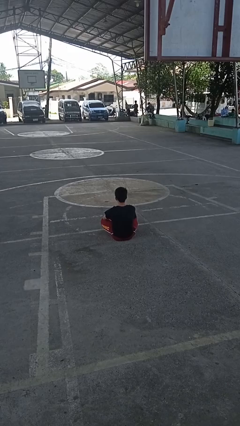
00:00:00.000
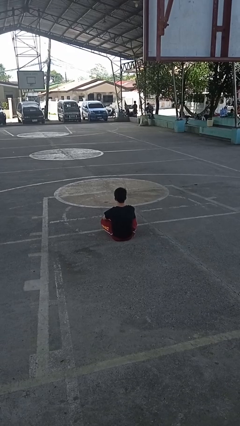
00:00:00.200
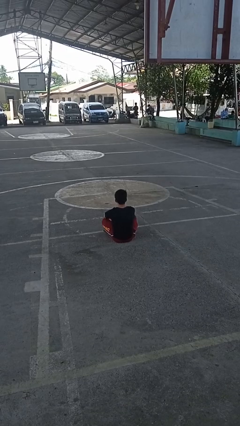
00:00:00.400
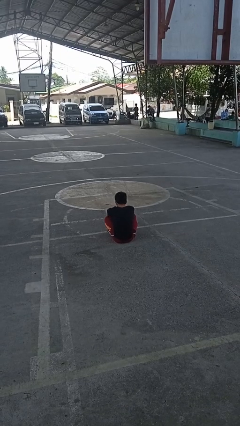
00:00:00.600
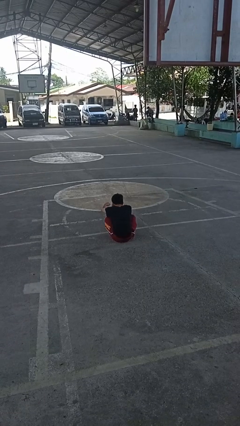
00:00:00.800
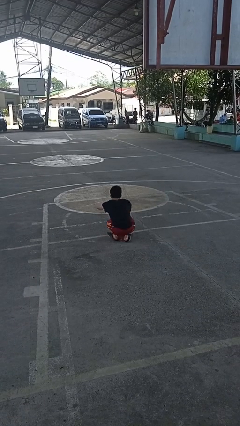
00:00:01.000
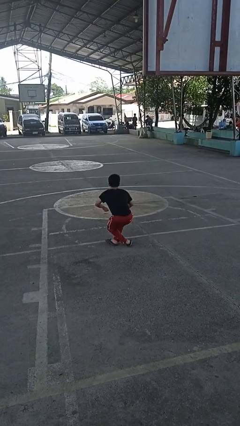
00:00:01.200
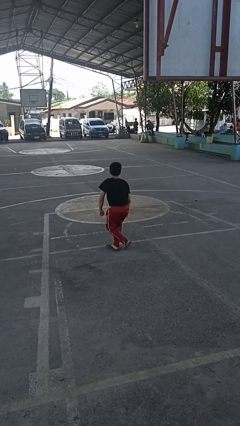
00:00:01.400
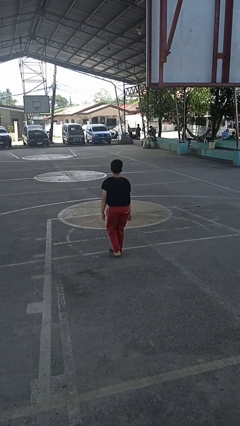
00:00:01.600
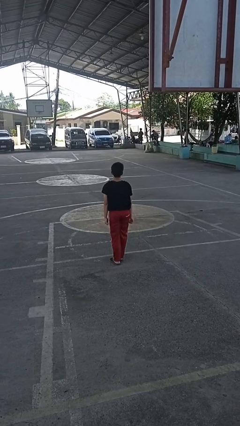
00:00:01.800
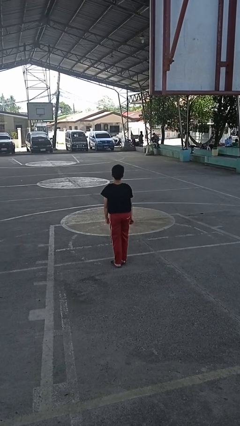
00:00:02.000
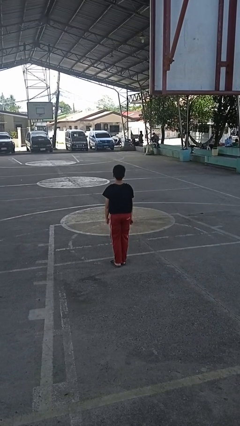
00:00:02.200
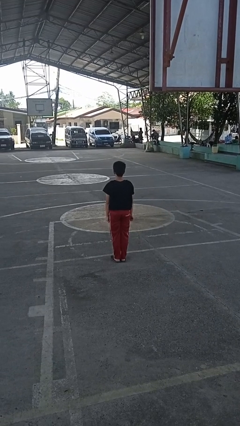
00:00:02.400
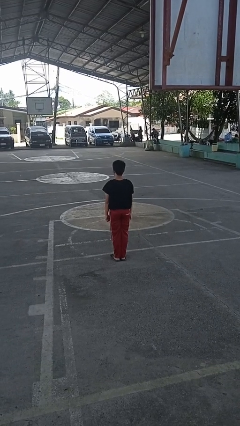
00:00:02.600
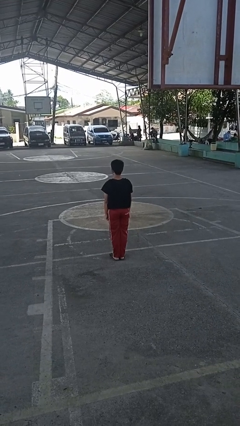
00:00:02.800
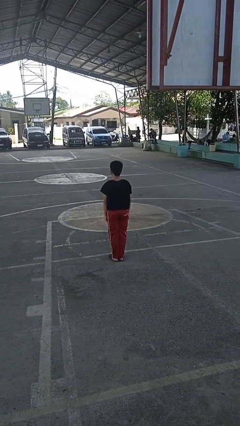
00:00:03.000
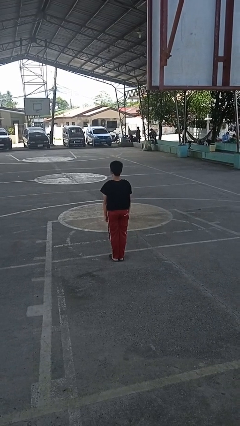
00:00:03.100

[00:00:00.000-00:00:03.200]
person stands up from floor

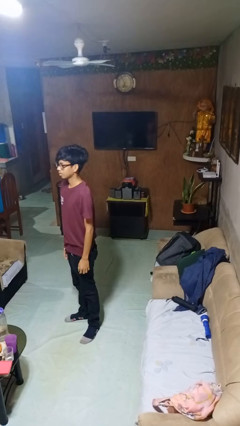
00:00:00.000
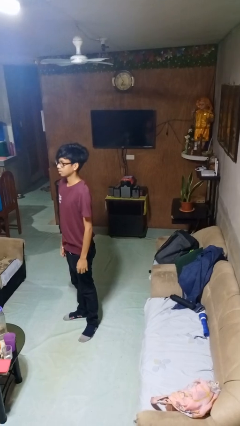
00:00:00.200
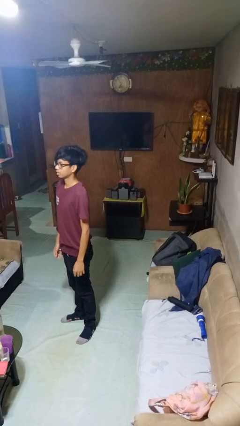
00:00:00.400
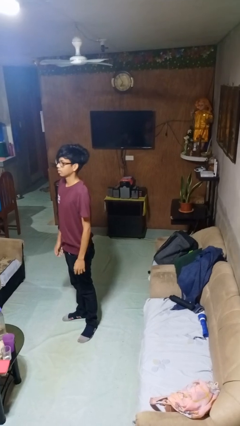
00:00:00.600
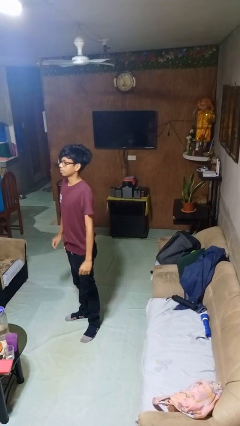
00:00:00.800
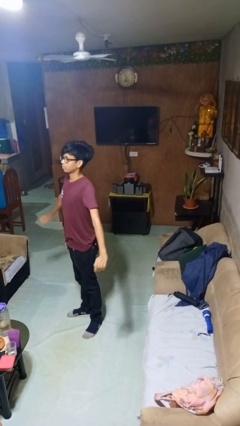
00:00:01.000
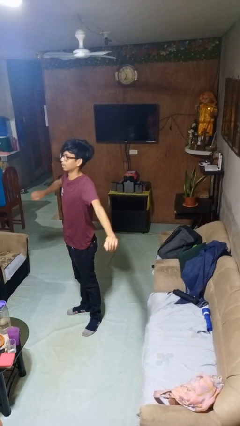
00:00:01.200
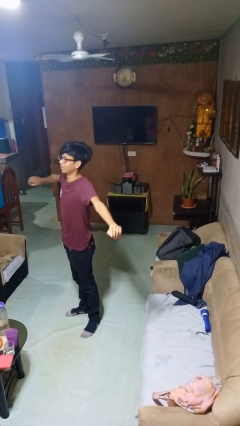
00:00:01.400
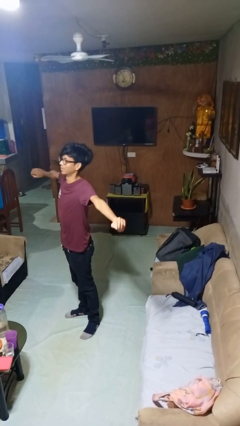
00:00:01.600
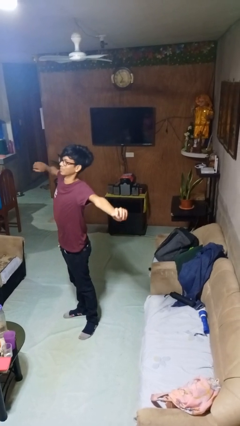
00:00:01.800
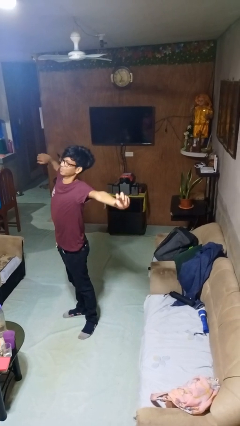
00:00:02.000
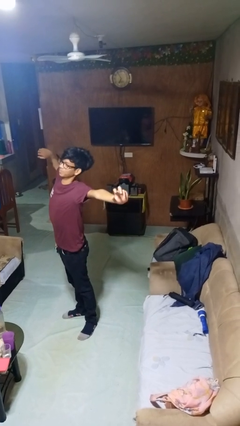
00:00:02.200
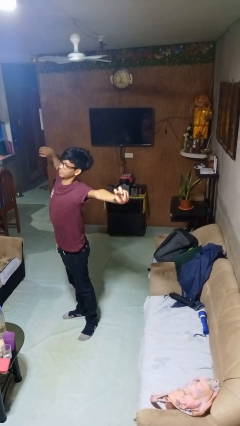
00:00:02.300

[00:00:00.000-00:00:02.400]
person stretches arms to side

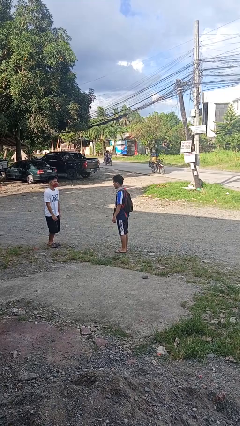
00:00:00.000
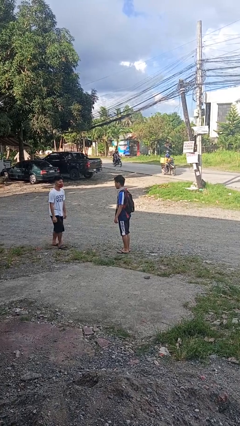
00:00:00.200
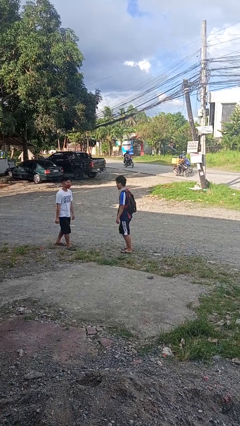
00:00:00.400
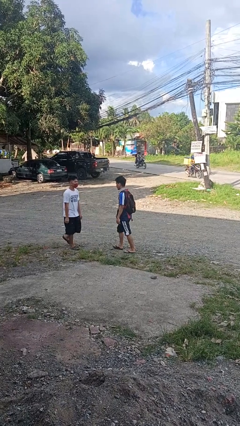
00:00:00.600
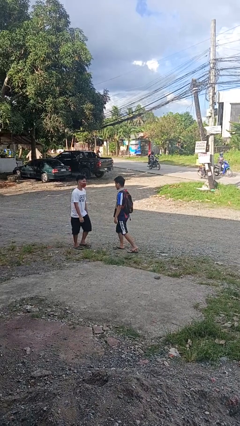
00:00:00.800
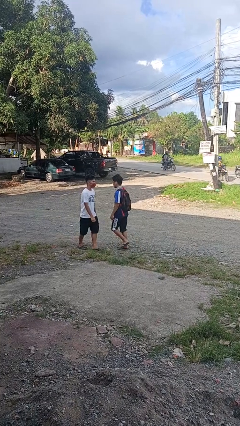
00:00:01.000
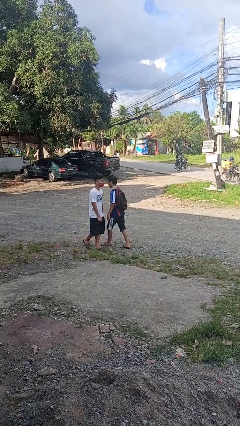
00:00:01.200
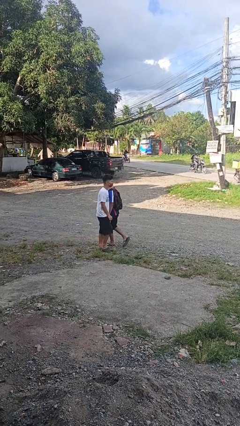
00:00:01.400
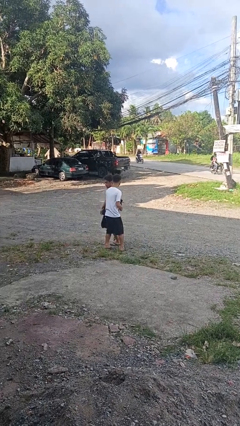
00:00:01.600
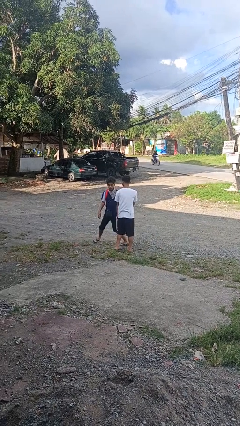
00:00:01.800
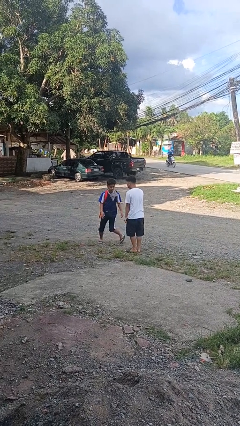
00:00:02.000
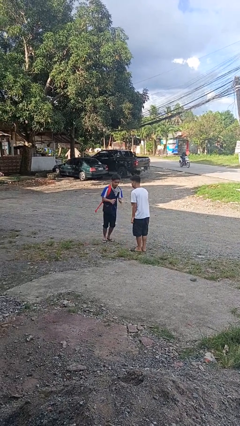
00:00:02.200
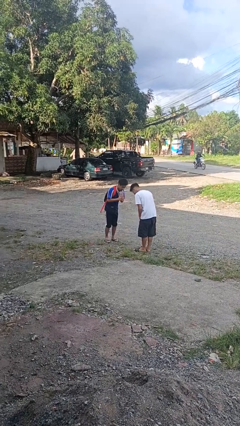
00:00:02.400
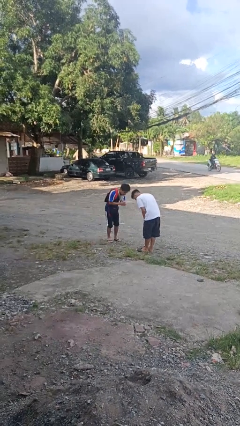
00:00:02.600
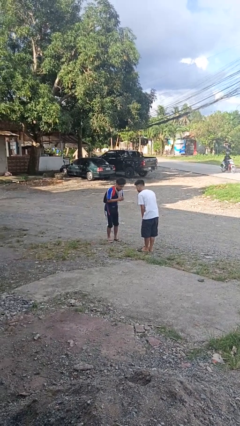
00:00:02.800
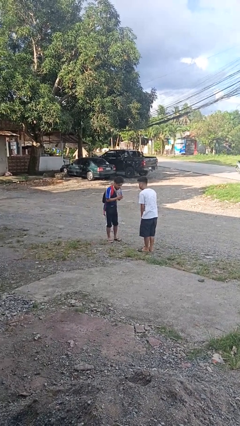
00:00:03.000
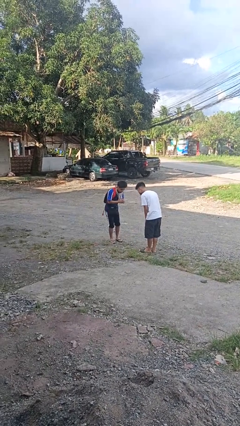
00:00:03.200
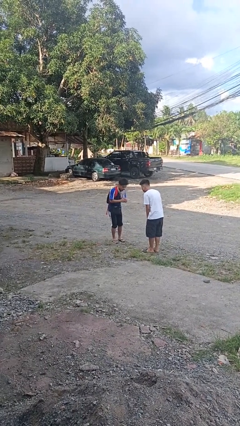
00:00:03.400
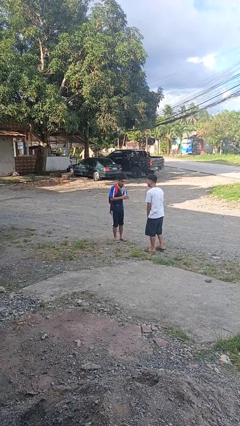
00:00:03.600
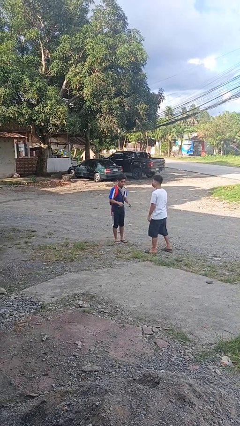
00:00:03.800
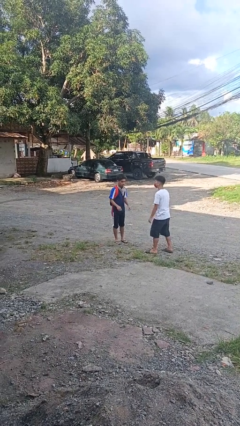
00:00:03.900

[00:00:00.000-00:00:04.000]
person bumps into person

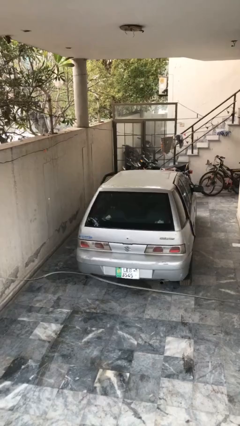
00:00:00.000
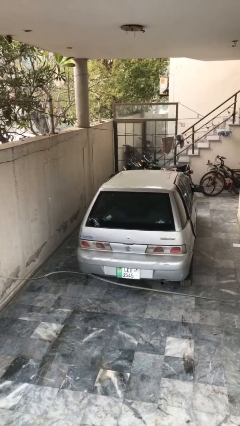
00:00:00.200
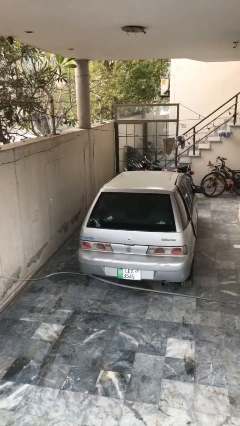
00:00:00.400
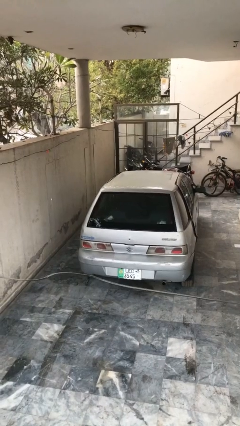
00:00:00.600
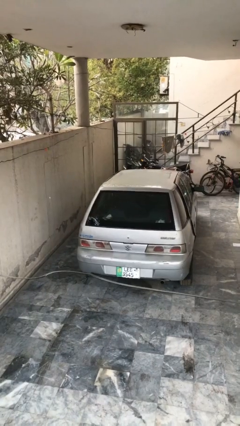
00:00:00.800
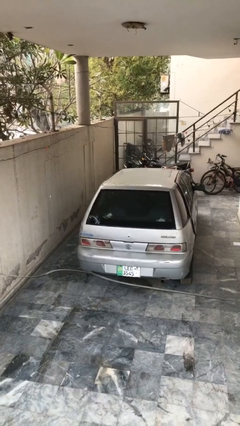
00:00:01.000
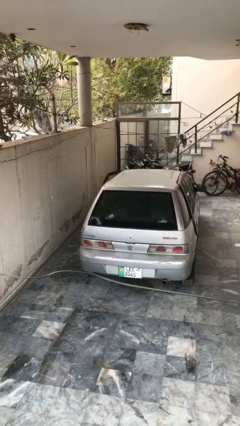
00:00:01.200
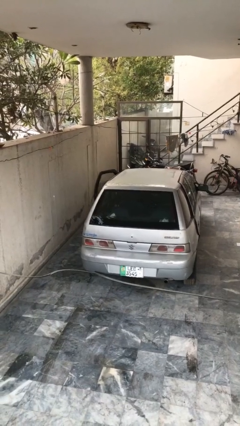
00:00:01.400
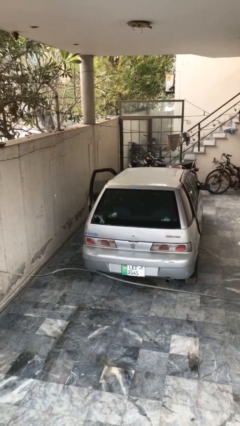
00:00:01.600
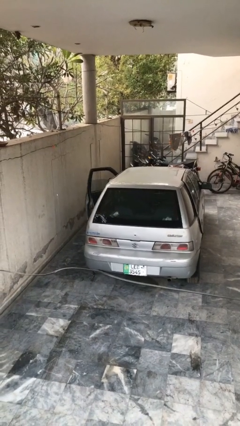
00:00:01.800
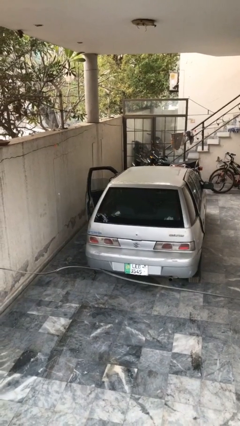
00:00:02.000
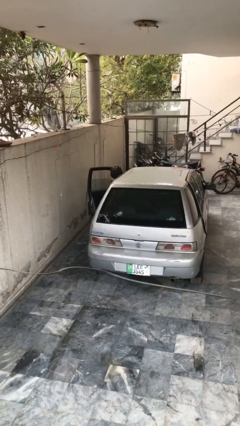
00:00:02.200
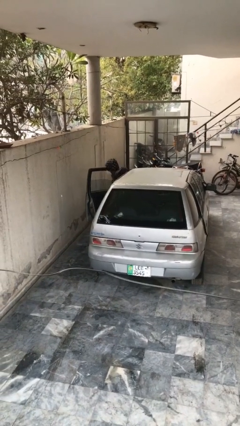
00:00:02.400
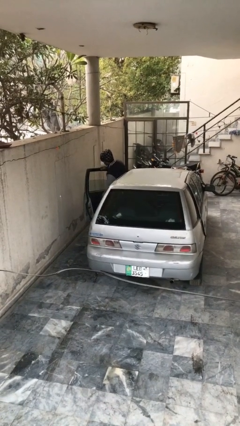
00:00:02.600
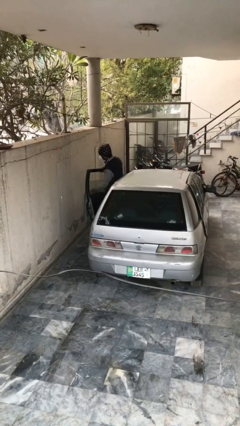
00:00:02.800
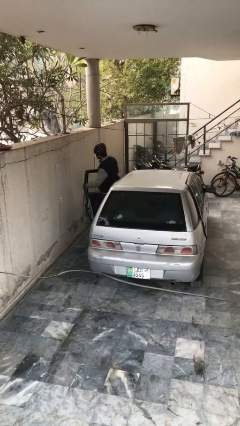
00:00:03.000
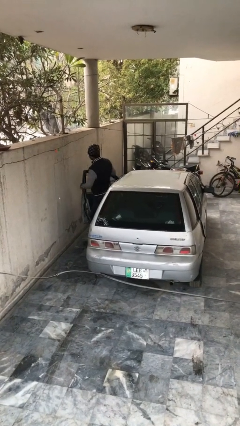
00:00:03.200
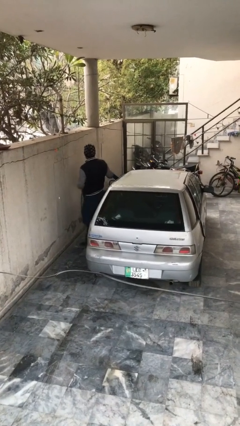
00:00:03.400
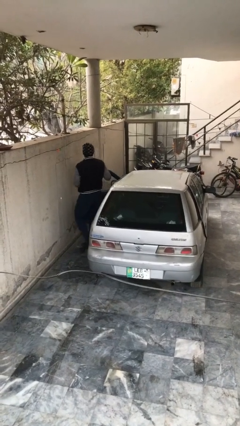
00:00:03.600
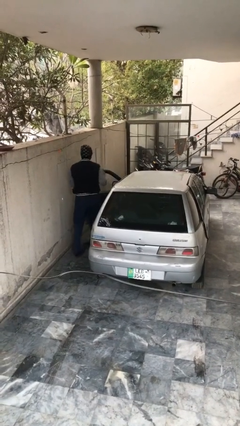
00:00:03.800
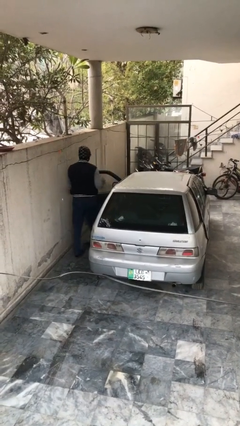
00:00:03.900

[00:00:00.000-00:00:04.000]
car drops off person

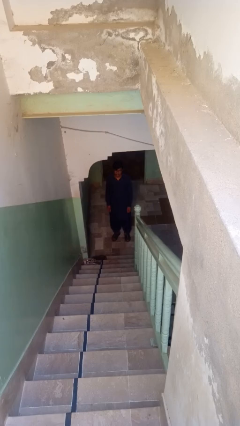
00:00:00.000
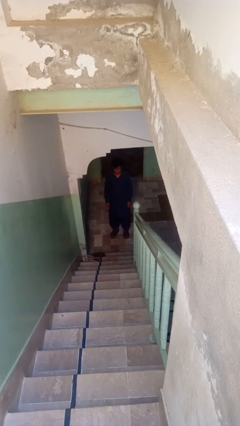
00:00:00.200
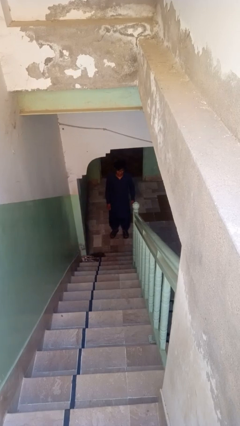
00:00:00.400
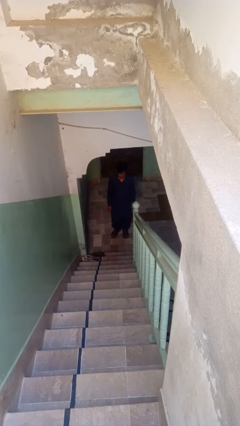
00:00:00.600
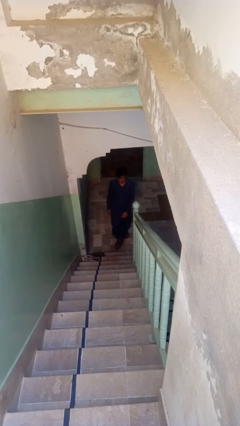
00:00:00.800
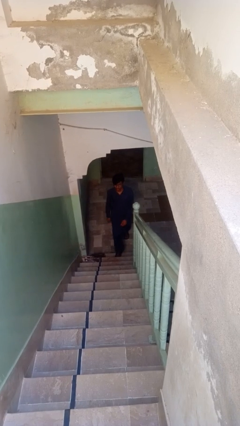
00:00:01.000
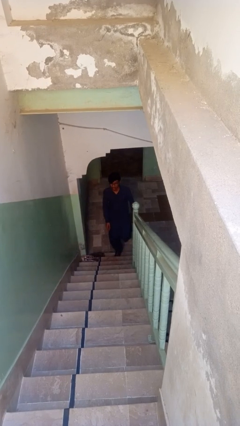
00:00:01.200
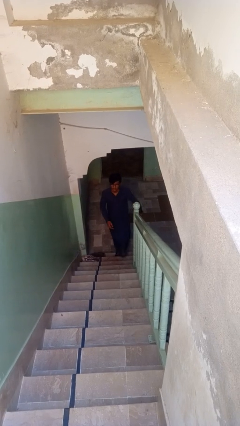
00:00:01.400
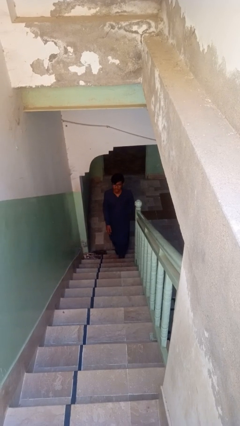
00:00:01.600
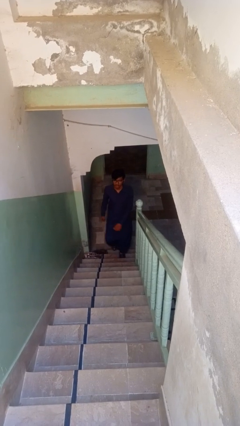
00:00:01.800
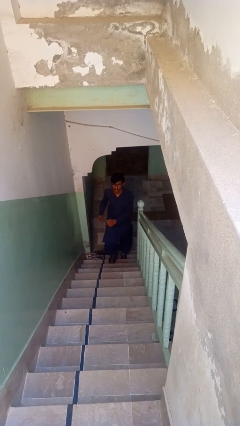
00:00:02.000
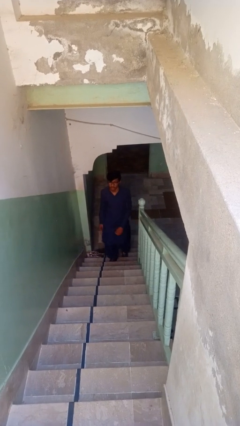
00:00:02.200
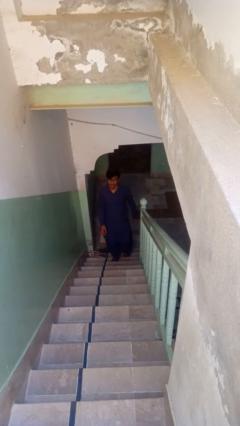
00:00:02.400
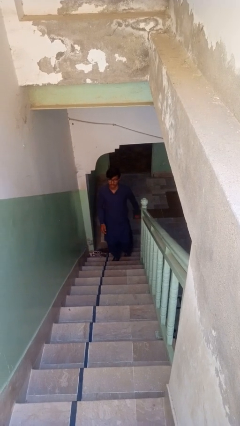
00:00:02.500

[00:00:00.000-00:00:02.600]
person climbs up stairs

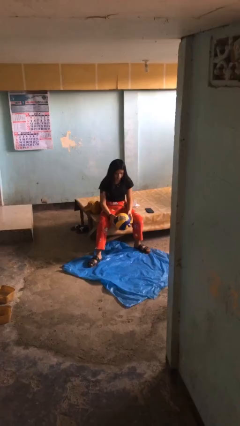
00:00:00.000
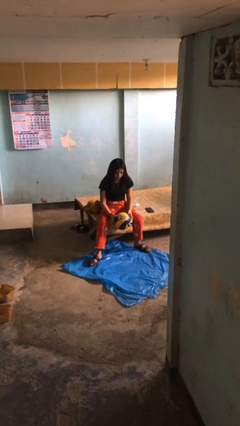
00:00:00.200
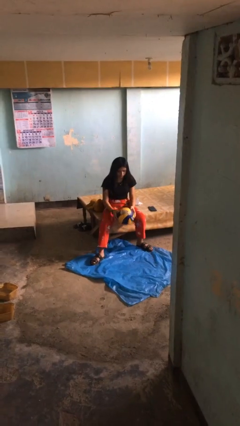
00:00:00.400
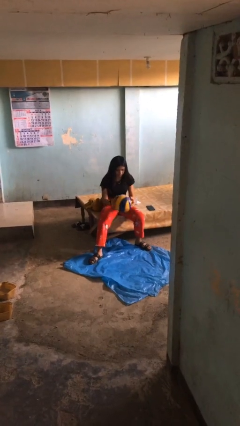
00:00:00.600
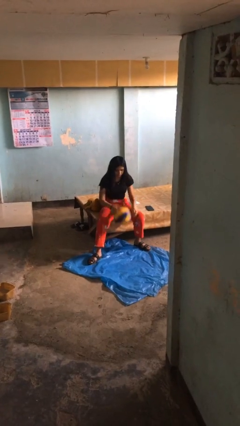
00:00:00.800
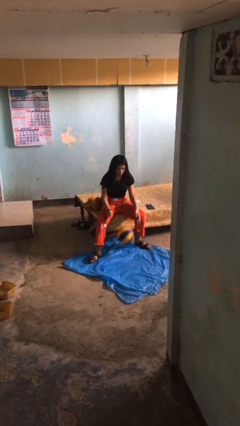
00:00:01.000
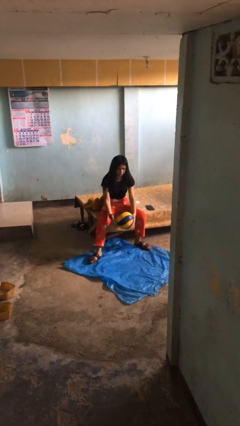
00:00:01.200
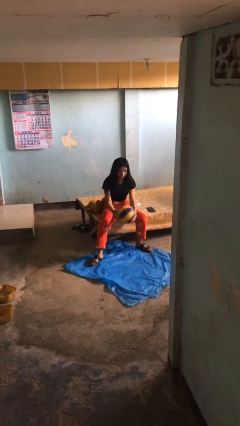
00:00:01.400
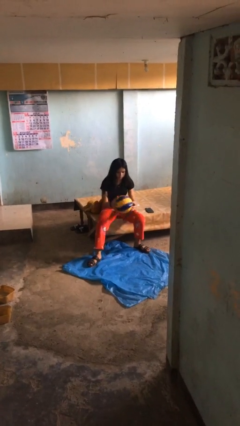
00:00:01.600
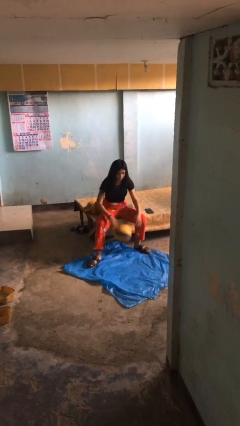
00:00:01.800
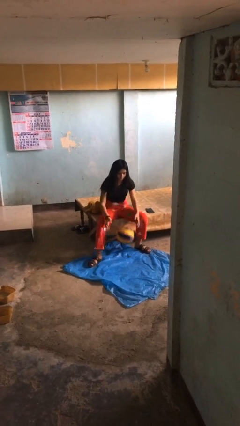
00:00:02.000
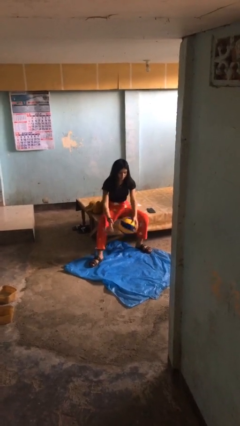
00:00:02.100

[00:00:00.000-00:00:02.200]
person bounces ball on floor
